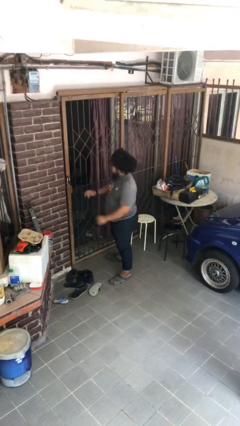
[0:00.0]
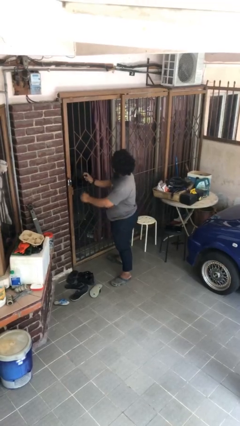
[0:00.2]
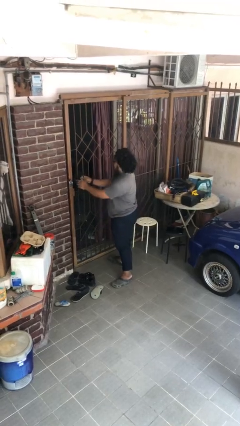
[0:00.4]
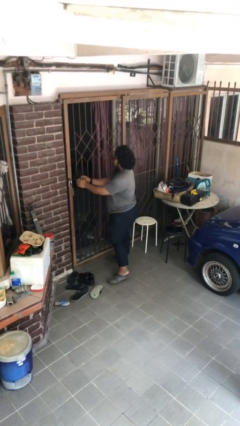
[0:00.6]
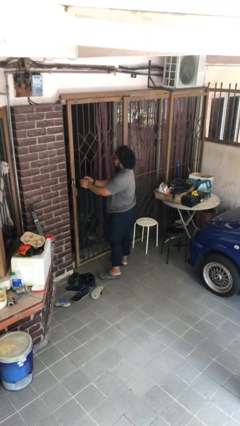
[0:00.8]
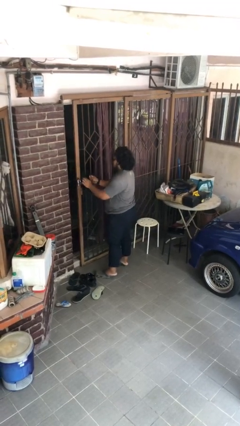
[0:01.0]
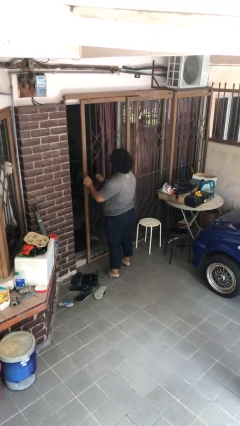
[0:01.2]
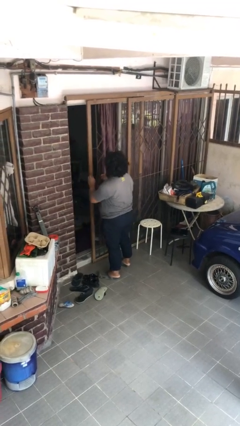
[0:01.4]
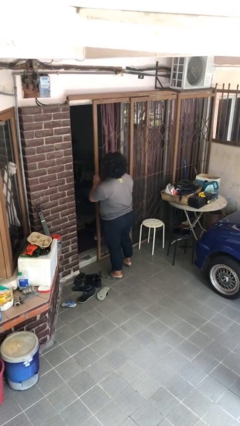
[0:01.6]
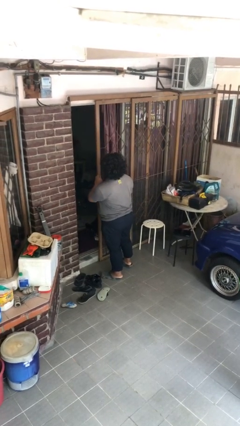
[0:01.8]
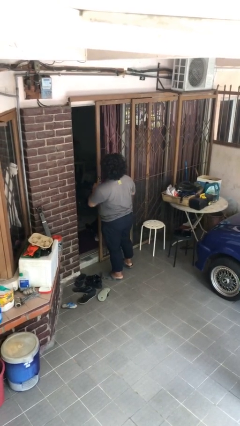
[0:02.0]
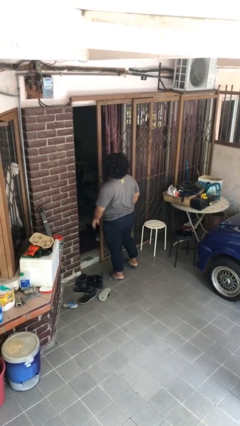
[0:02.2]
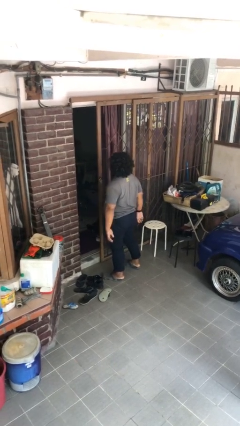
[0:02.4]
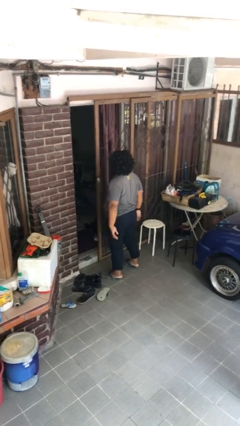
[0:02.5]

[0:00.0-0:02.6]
person opens facility door

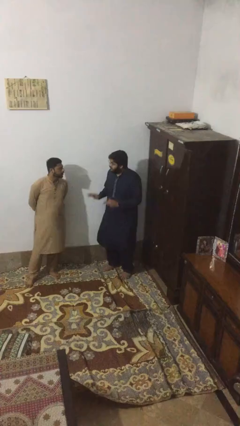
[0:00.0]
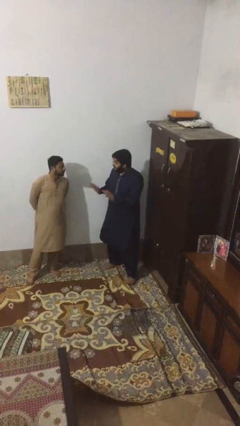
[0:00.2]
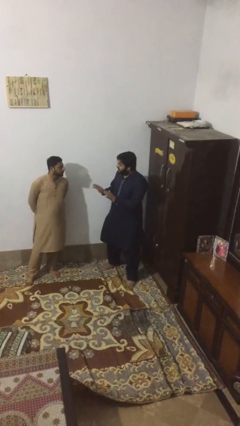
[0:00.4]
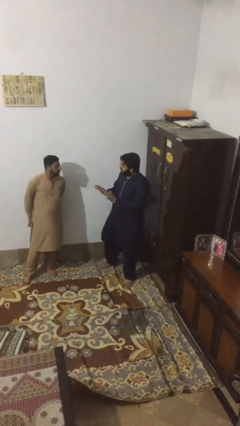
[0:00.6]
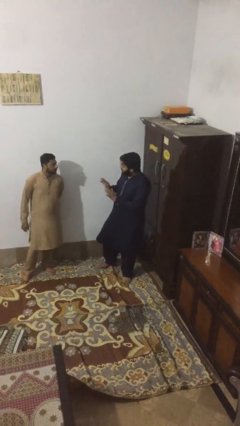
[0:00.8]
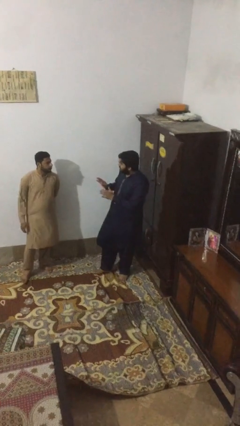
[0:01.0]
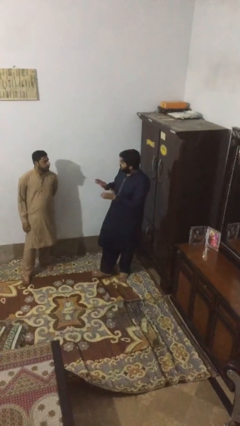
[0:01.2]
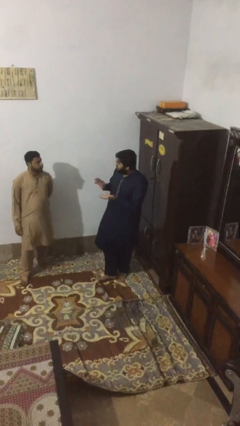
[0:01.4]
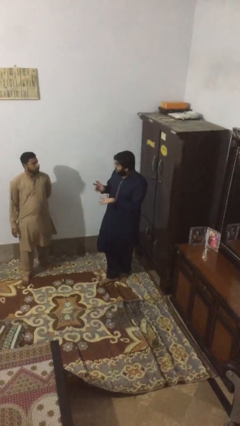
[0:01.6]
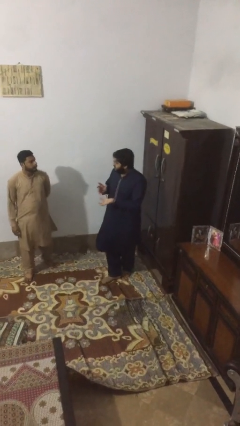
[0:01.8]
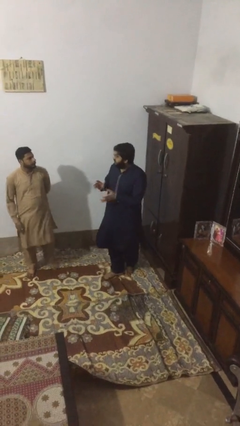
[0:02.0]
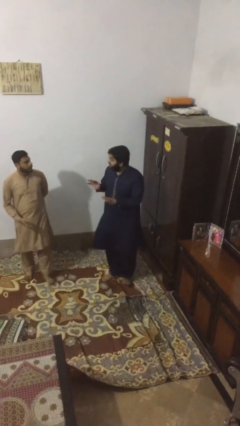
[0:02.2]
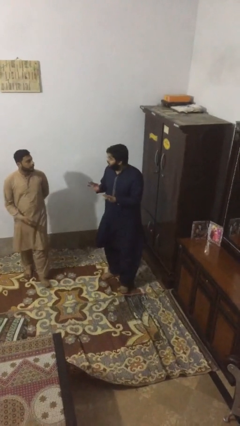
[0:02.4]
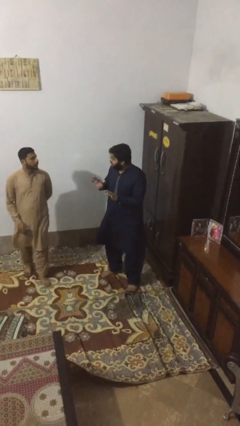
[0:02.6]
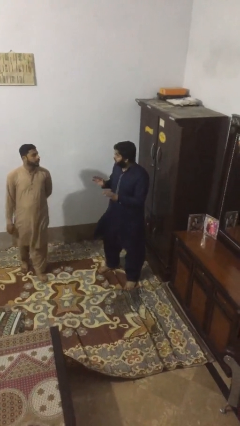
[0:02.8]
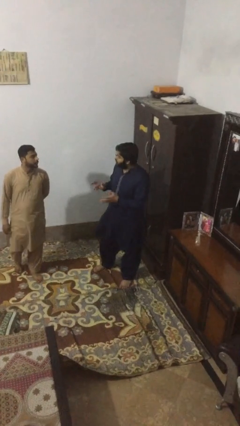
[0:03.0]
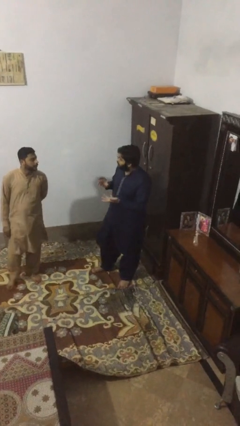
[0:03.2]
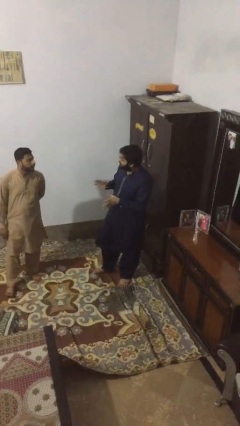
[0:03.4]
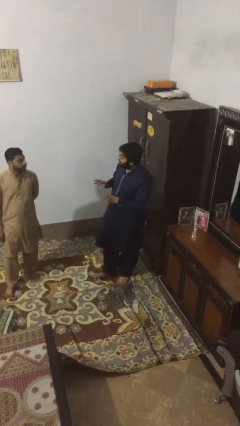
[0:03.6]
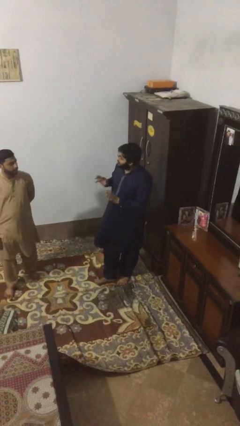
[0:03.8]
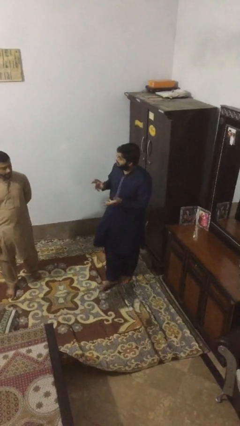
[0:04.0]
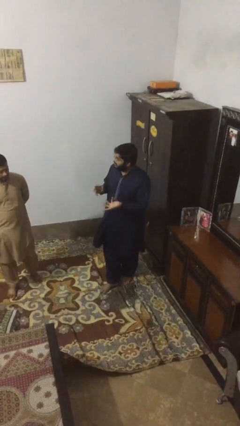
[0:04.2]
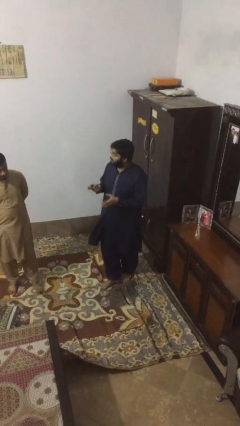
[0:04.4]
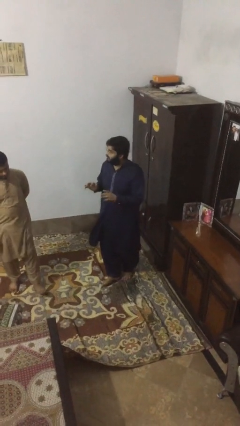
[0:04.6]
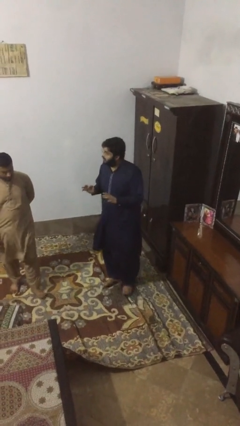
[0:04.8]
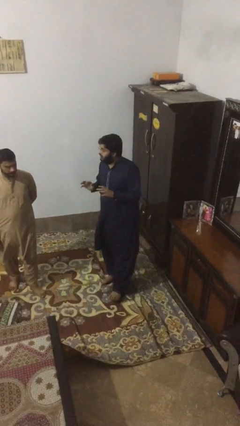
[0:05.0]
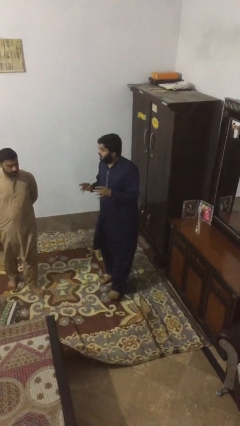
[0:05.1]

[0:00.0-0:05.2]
person talks to person

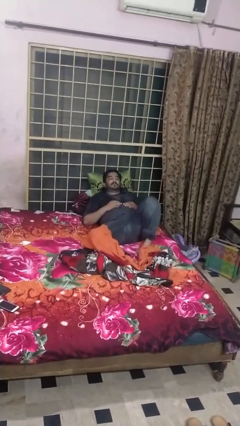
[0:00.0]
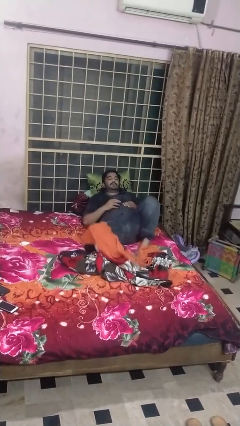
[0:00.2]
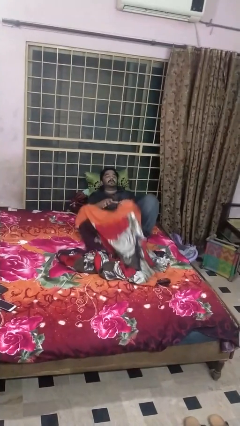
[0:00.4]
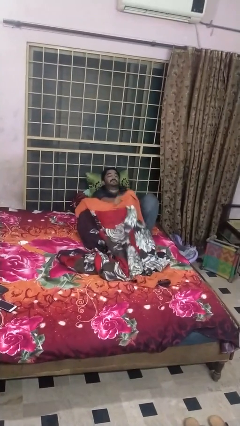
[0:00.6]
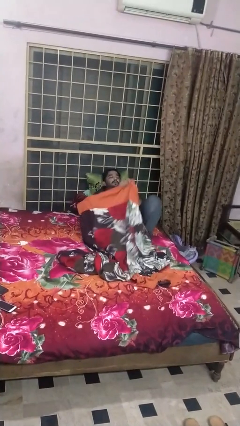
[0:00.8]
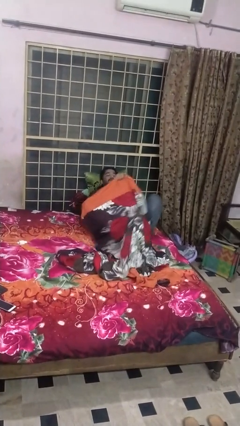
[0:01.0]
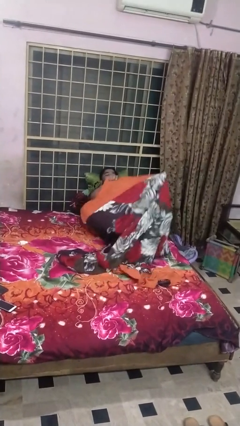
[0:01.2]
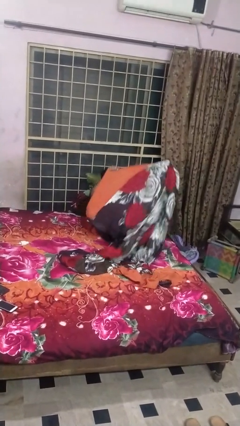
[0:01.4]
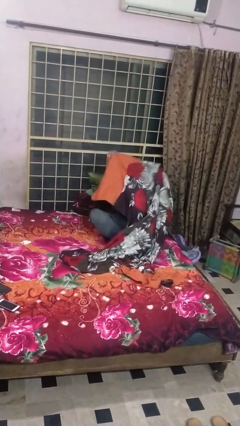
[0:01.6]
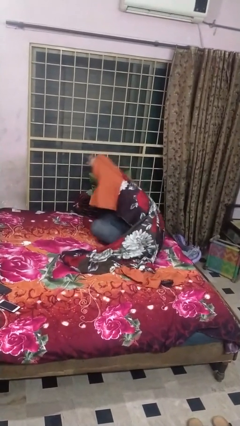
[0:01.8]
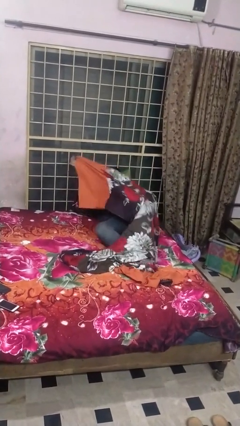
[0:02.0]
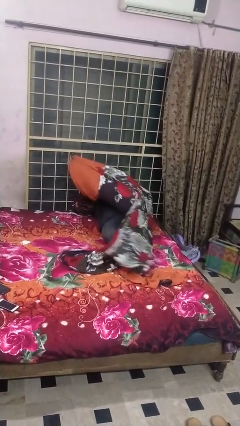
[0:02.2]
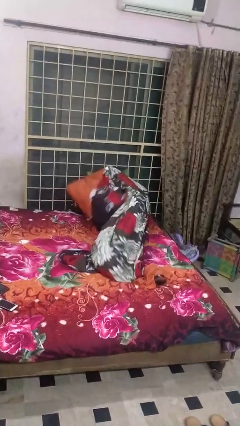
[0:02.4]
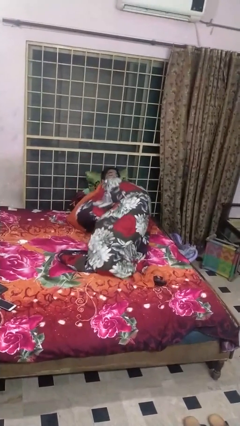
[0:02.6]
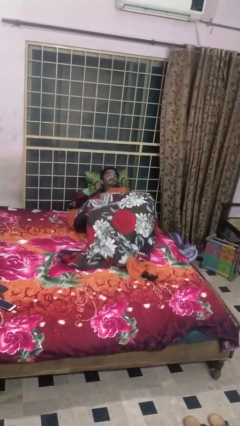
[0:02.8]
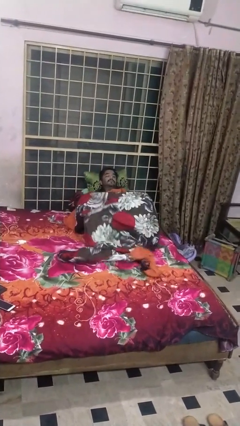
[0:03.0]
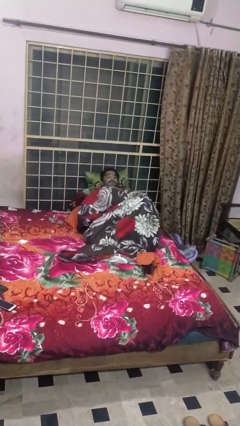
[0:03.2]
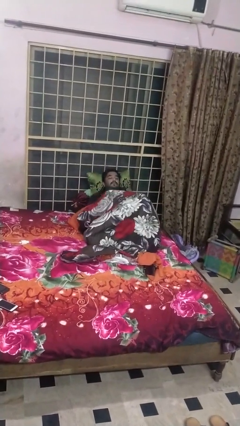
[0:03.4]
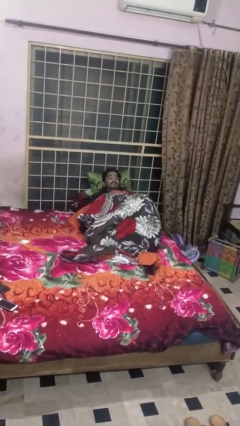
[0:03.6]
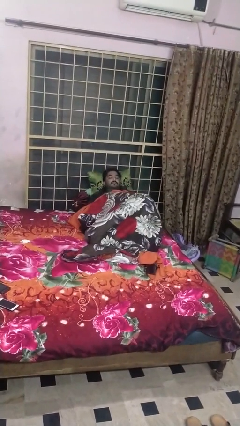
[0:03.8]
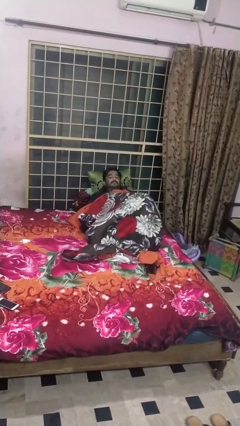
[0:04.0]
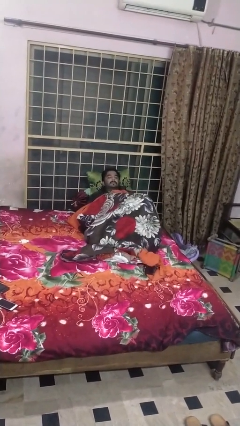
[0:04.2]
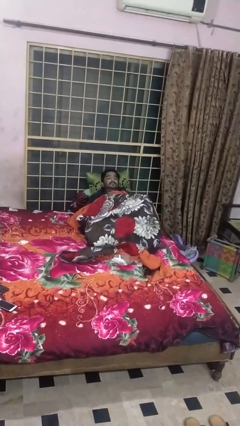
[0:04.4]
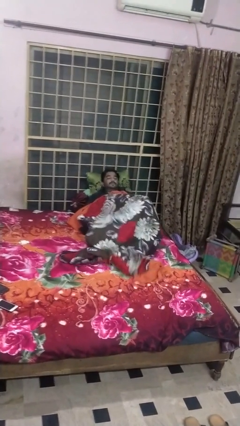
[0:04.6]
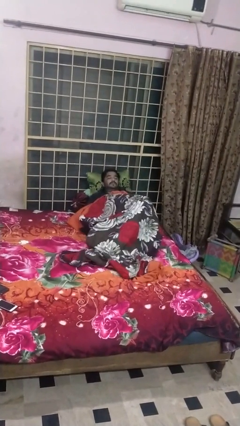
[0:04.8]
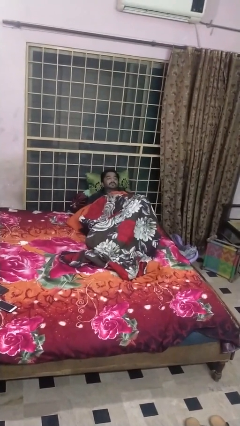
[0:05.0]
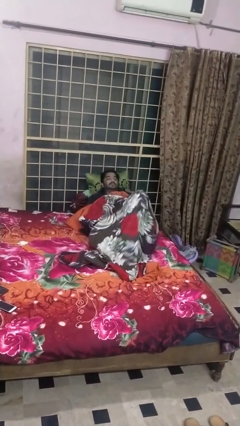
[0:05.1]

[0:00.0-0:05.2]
person covers with bedsheets

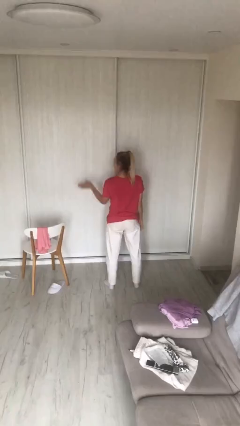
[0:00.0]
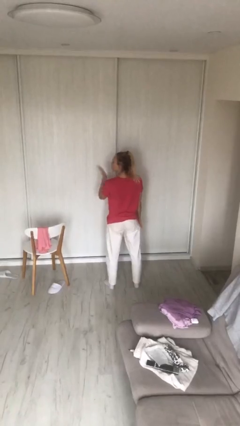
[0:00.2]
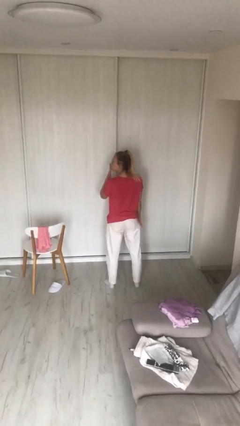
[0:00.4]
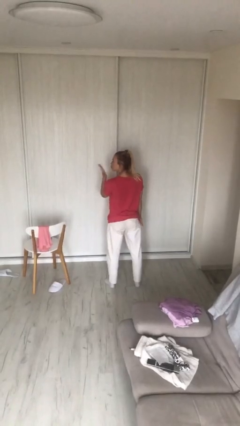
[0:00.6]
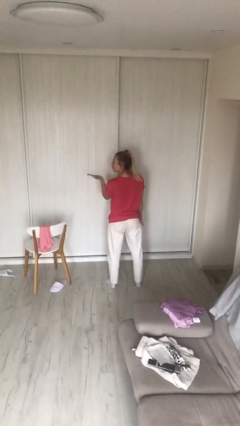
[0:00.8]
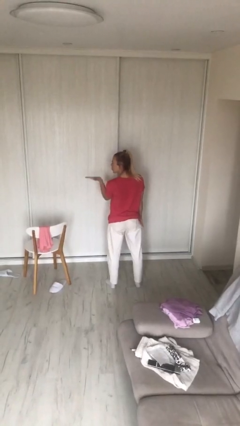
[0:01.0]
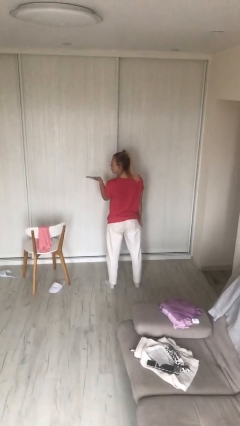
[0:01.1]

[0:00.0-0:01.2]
person gestures blow kiss

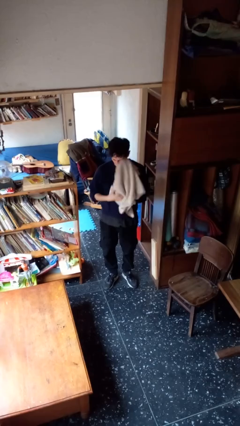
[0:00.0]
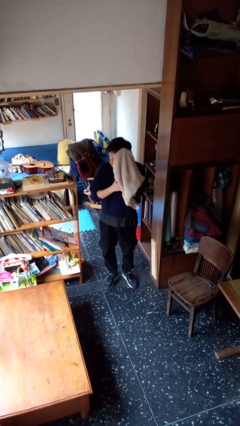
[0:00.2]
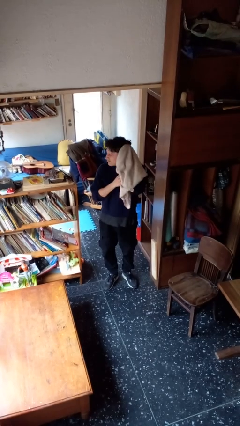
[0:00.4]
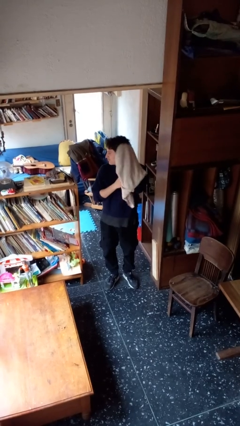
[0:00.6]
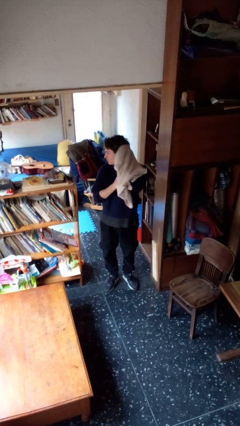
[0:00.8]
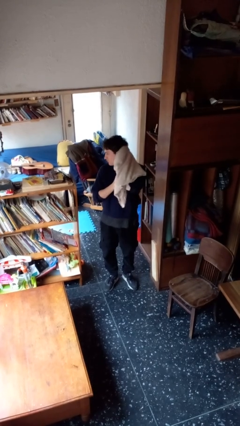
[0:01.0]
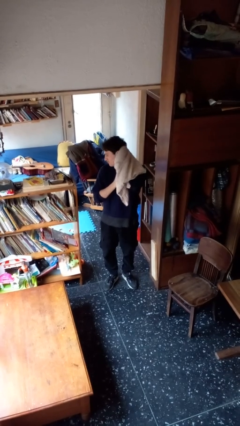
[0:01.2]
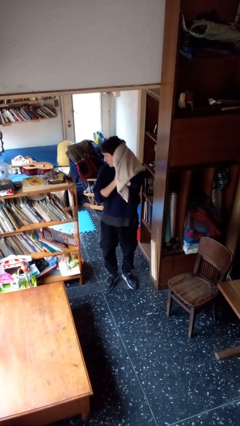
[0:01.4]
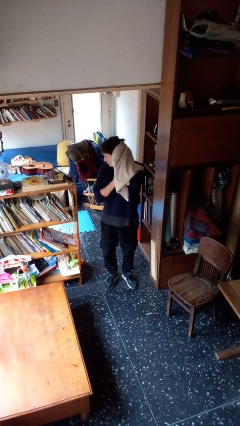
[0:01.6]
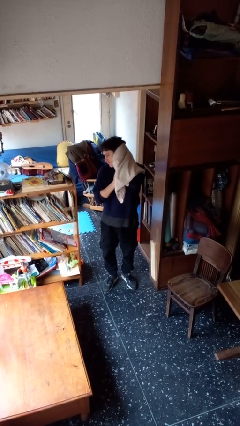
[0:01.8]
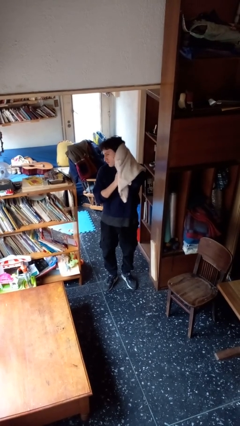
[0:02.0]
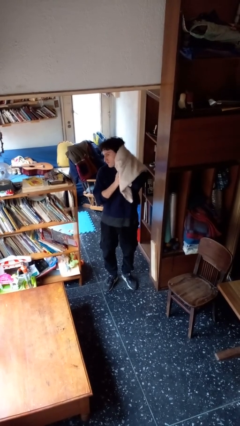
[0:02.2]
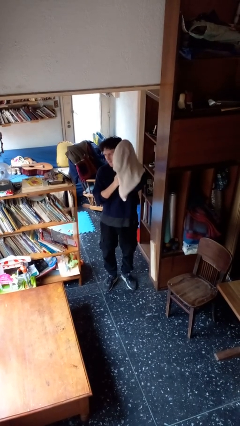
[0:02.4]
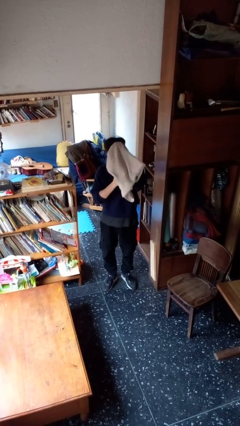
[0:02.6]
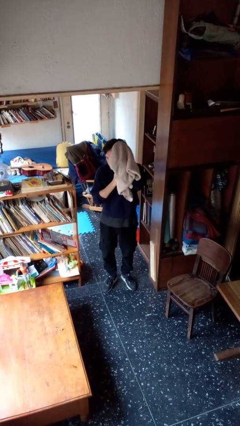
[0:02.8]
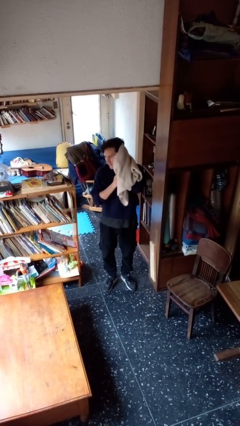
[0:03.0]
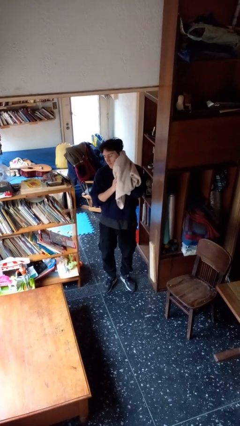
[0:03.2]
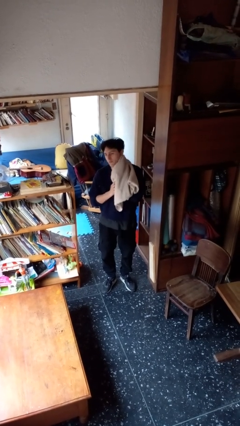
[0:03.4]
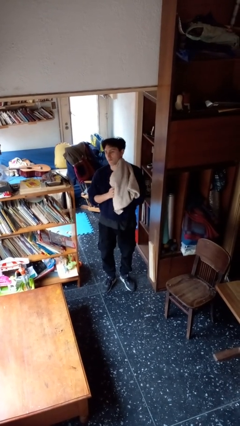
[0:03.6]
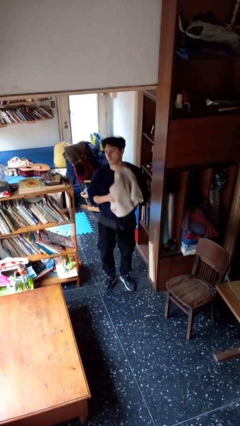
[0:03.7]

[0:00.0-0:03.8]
person dries hair with towel
